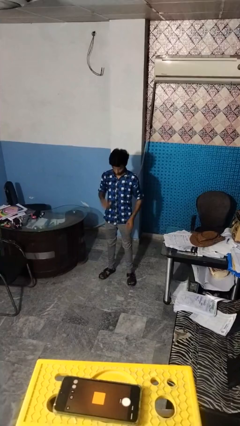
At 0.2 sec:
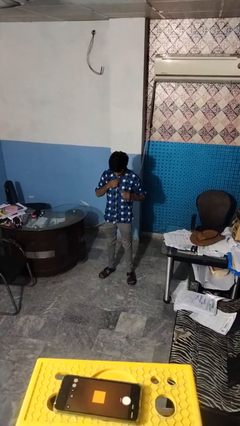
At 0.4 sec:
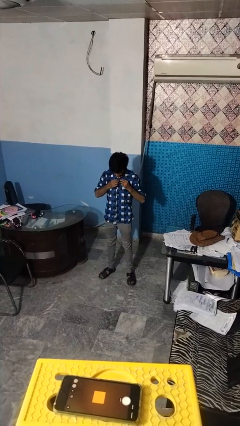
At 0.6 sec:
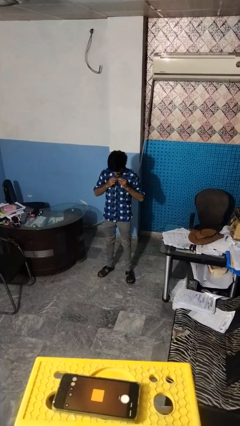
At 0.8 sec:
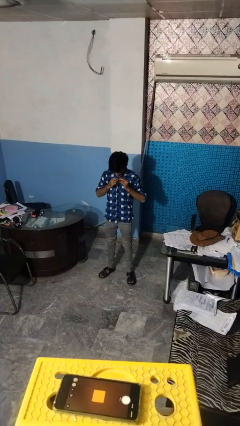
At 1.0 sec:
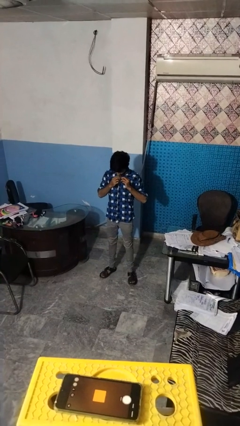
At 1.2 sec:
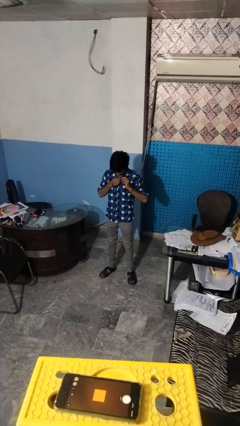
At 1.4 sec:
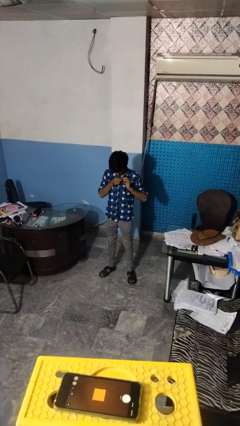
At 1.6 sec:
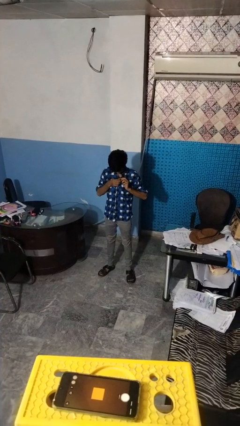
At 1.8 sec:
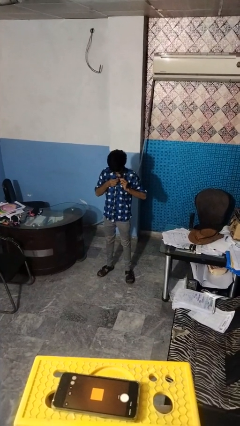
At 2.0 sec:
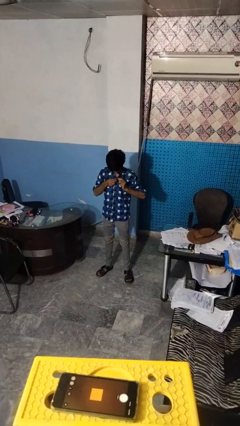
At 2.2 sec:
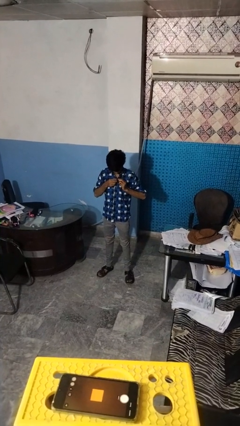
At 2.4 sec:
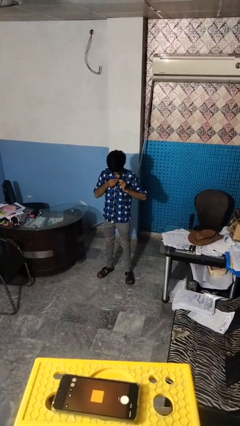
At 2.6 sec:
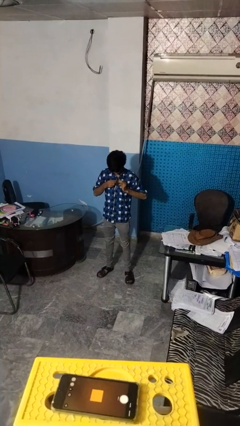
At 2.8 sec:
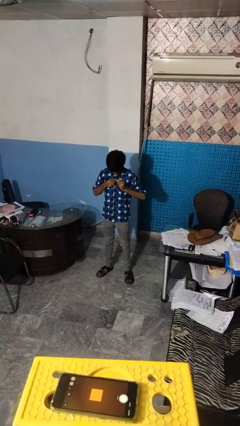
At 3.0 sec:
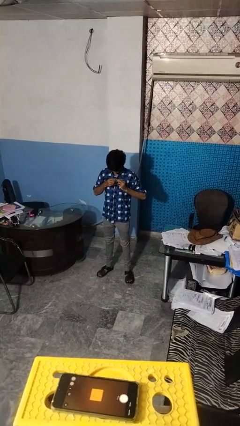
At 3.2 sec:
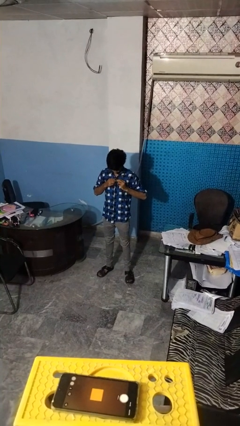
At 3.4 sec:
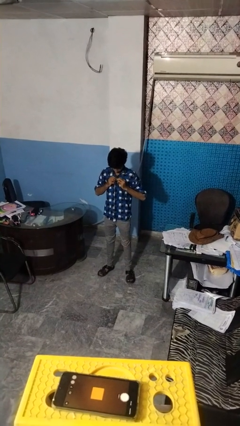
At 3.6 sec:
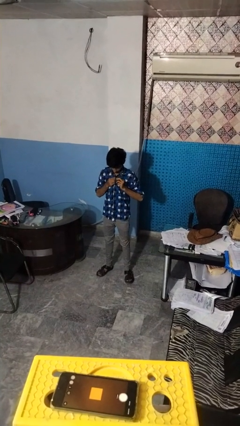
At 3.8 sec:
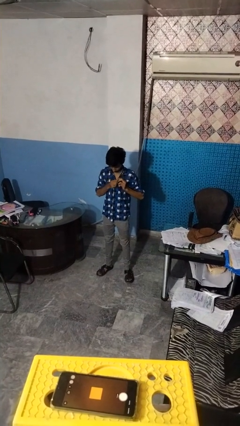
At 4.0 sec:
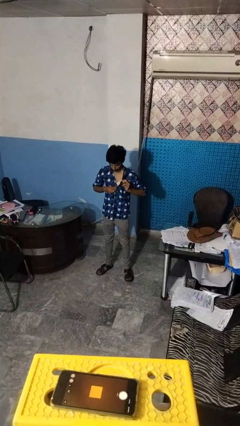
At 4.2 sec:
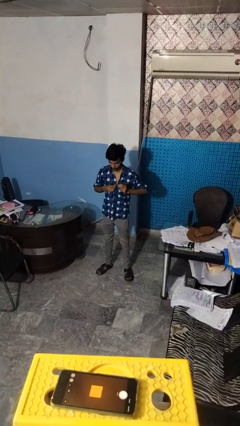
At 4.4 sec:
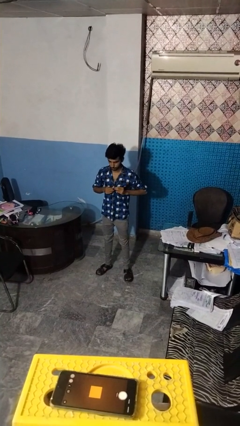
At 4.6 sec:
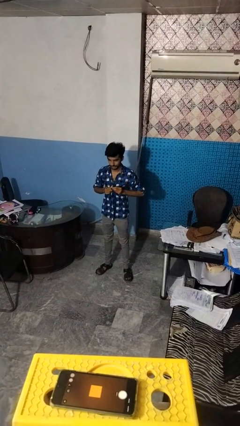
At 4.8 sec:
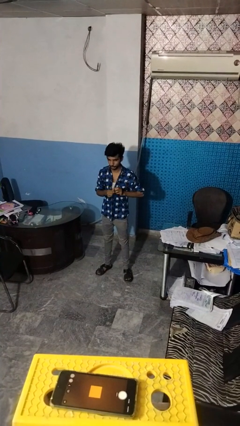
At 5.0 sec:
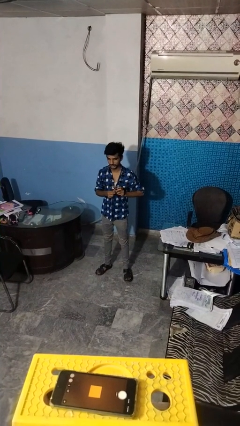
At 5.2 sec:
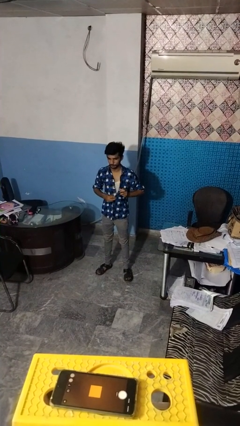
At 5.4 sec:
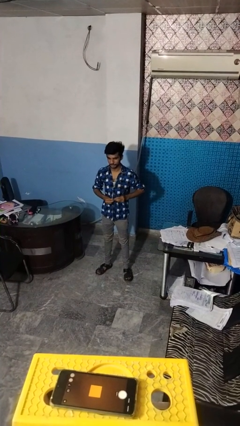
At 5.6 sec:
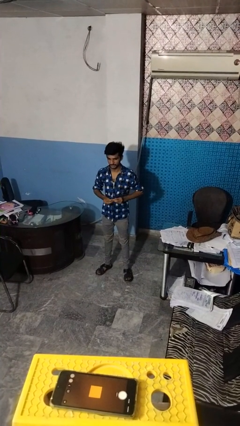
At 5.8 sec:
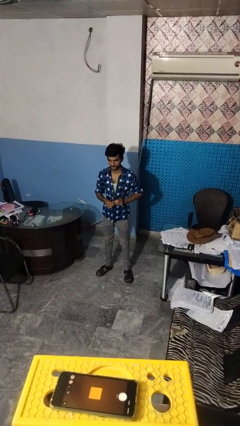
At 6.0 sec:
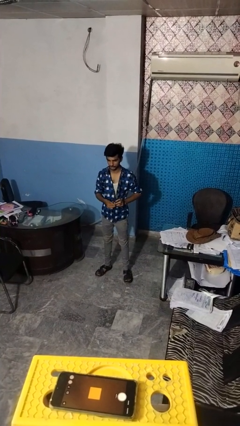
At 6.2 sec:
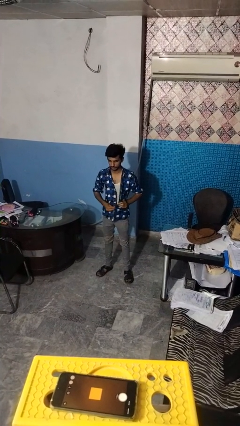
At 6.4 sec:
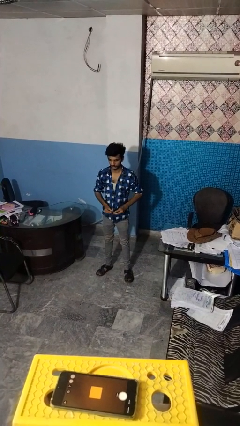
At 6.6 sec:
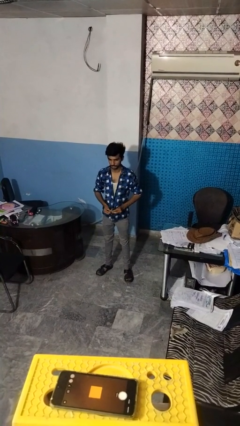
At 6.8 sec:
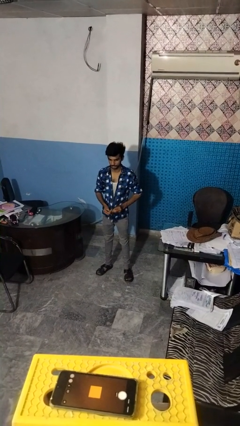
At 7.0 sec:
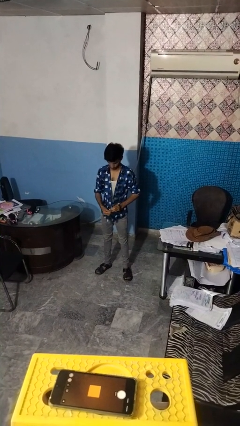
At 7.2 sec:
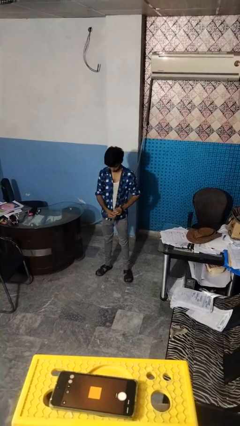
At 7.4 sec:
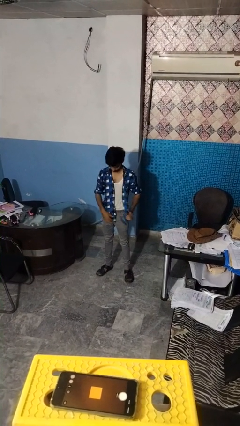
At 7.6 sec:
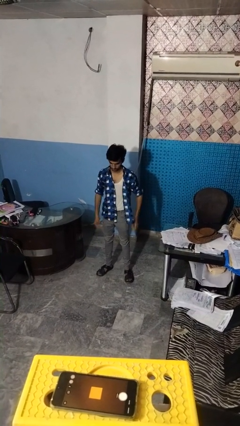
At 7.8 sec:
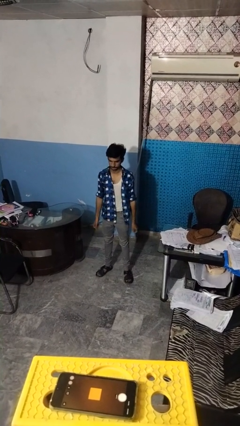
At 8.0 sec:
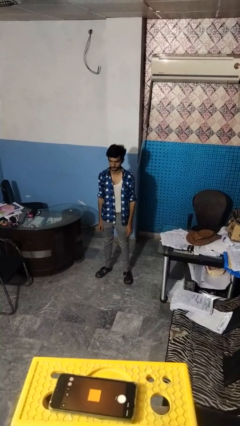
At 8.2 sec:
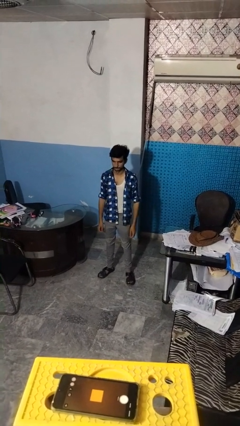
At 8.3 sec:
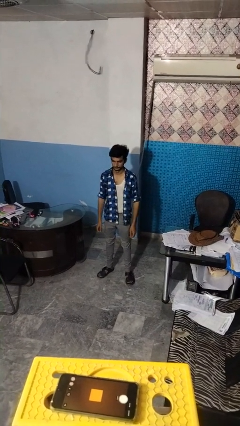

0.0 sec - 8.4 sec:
person unbuttons shirt

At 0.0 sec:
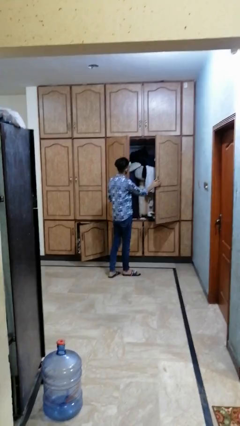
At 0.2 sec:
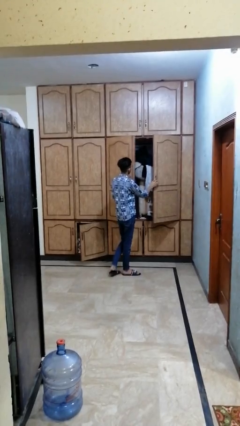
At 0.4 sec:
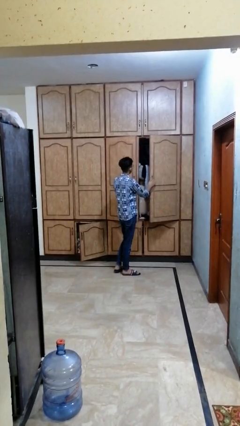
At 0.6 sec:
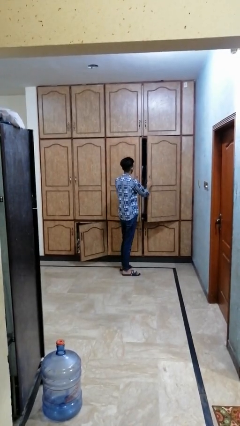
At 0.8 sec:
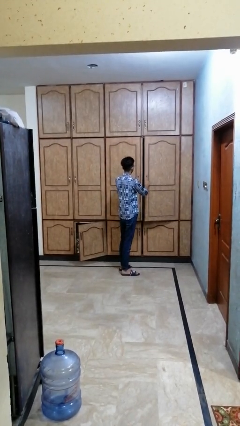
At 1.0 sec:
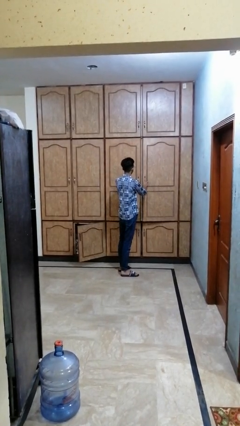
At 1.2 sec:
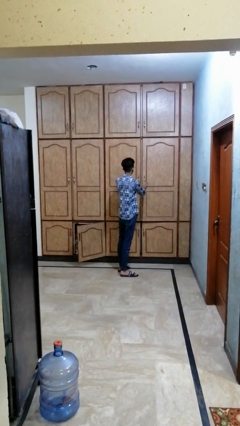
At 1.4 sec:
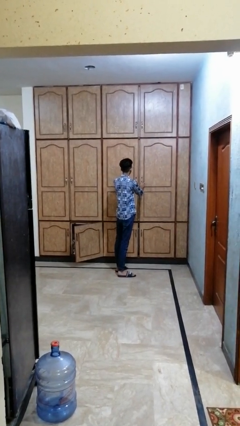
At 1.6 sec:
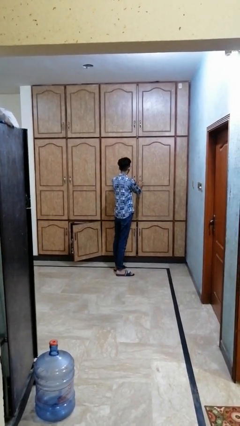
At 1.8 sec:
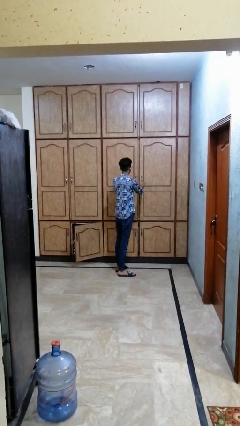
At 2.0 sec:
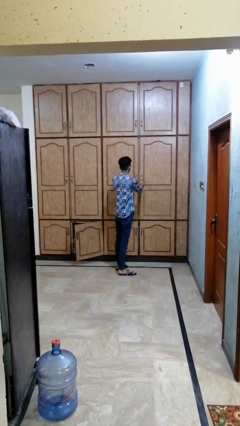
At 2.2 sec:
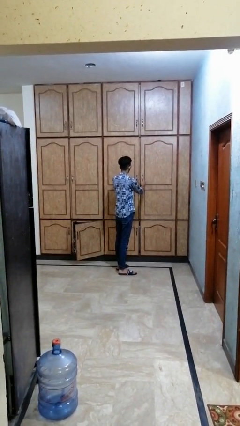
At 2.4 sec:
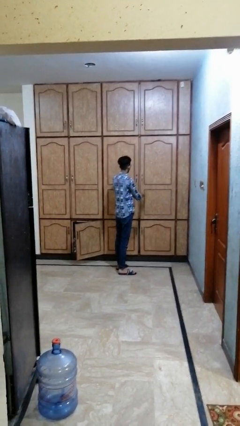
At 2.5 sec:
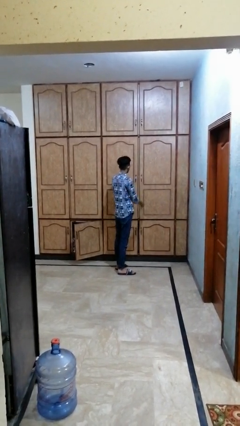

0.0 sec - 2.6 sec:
person closes dresser drawer

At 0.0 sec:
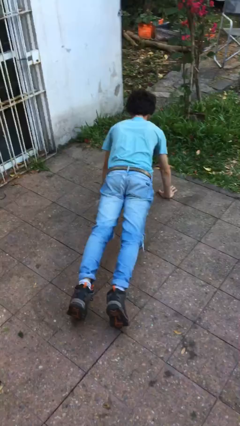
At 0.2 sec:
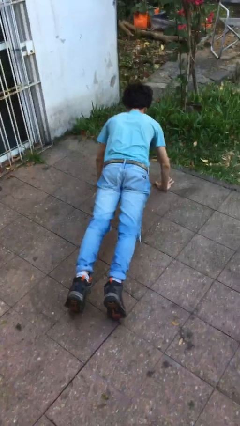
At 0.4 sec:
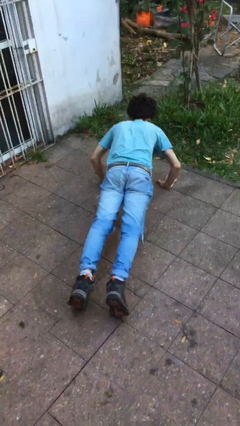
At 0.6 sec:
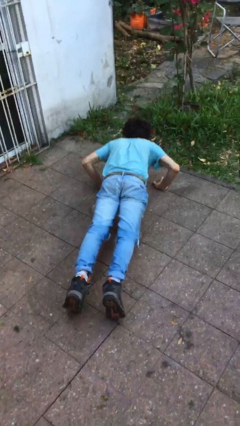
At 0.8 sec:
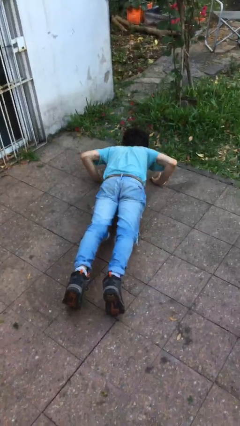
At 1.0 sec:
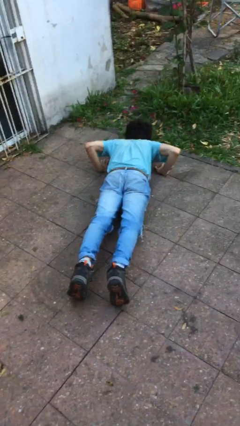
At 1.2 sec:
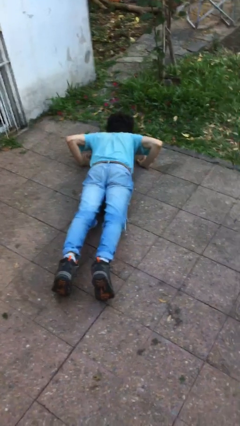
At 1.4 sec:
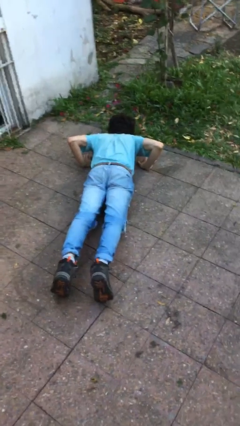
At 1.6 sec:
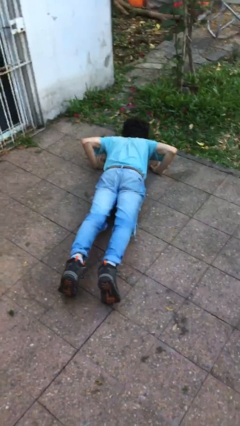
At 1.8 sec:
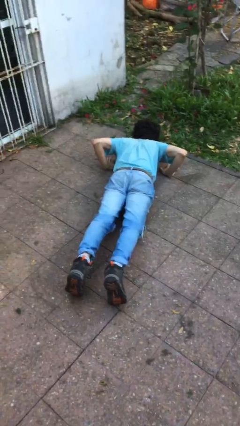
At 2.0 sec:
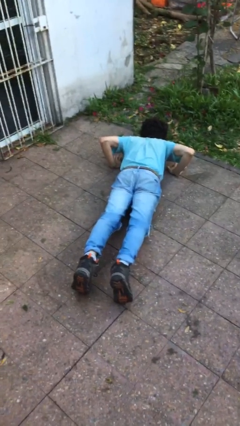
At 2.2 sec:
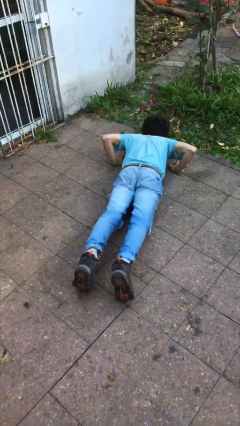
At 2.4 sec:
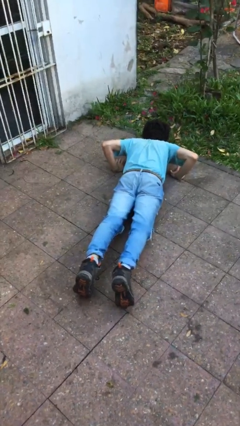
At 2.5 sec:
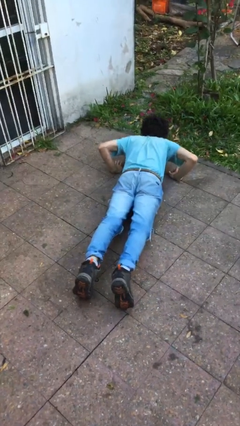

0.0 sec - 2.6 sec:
person exercises with pushup

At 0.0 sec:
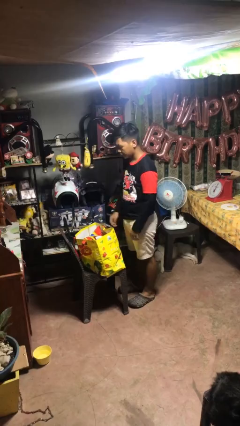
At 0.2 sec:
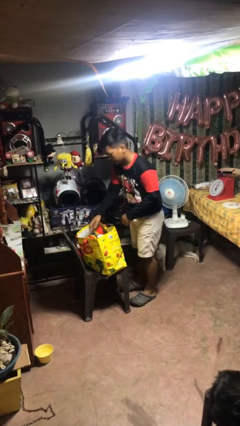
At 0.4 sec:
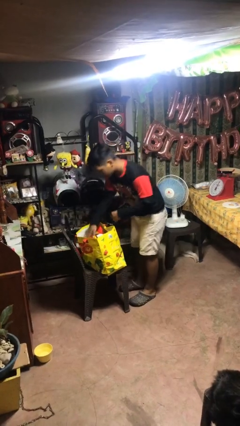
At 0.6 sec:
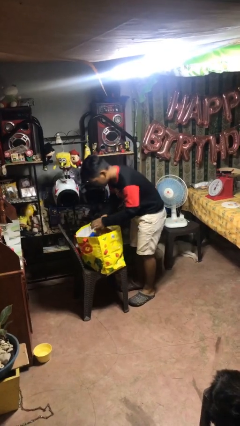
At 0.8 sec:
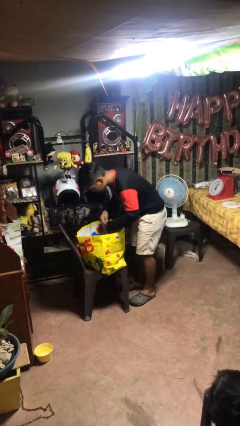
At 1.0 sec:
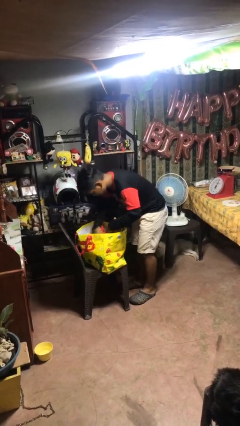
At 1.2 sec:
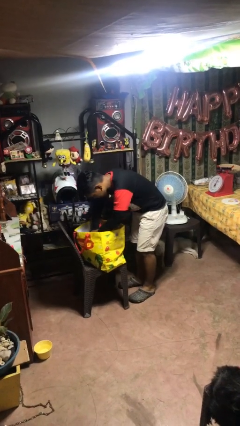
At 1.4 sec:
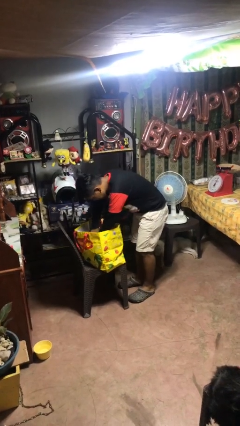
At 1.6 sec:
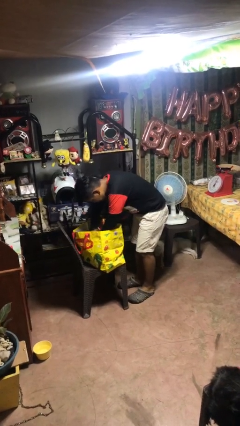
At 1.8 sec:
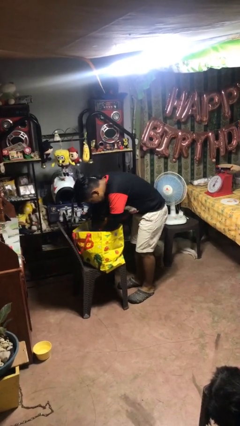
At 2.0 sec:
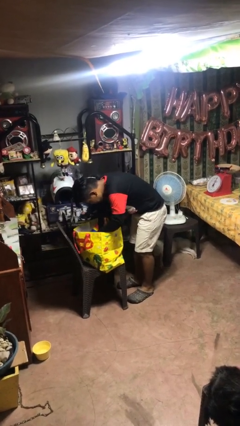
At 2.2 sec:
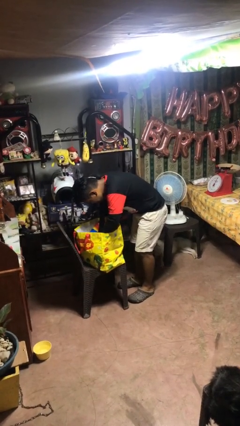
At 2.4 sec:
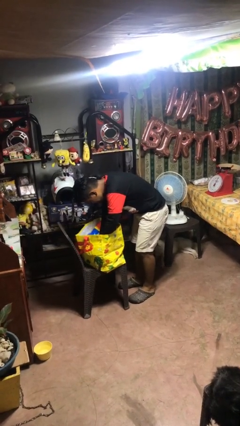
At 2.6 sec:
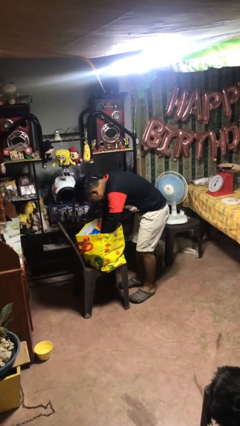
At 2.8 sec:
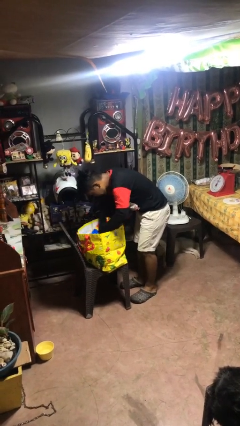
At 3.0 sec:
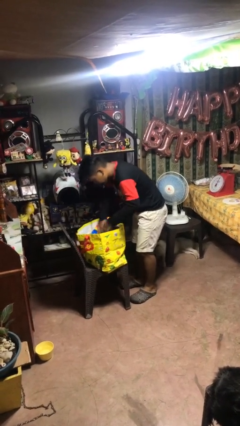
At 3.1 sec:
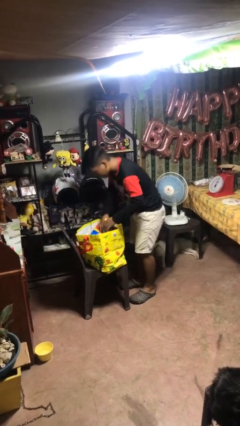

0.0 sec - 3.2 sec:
person searches in bag

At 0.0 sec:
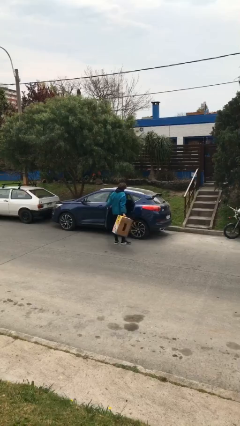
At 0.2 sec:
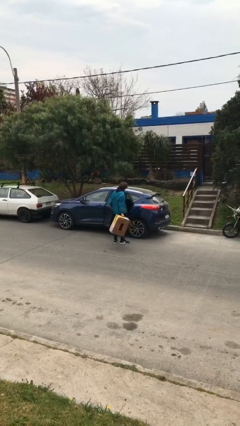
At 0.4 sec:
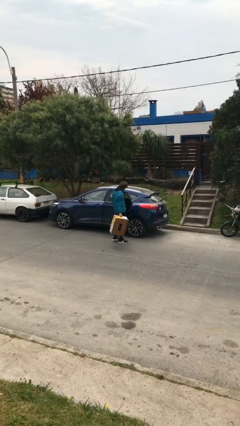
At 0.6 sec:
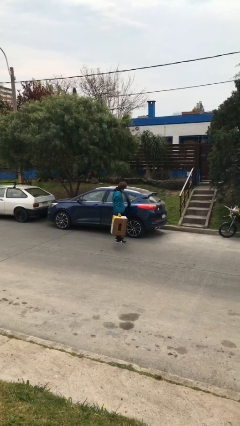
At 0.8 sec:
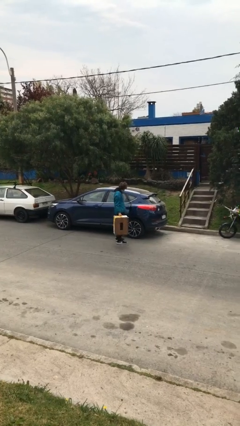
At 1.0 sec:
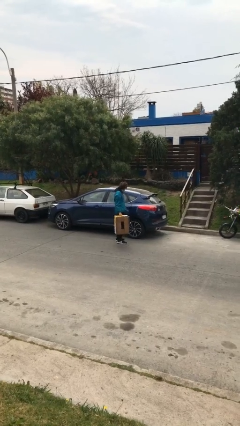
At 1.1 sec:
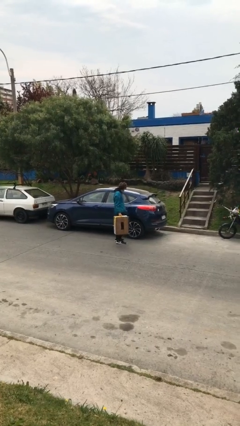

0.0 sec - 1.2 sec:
person closes car door
